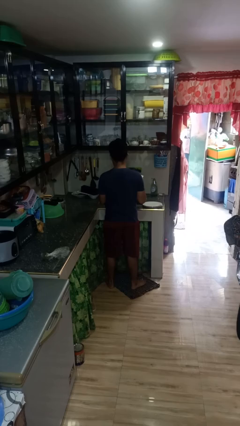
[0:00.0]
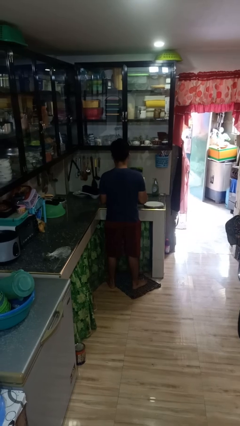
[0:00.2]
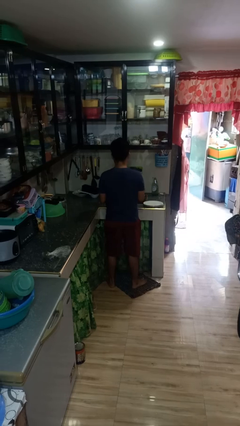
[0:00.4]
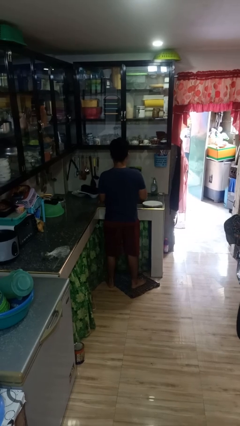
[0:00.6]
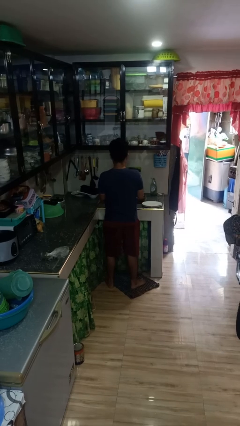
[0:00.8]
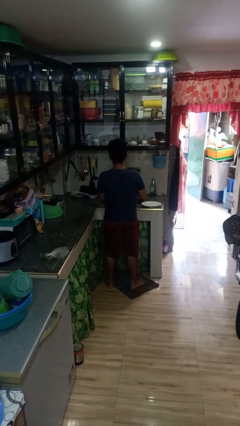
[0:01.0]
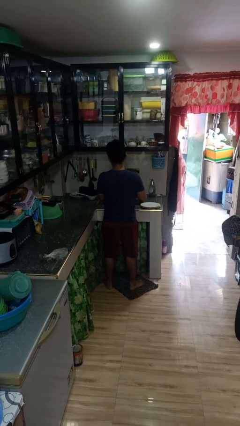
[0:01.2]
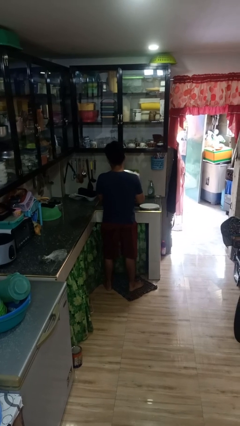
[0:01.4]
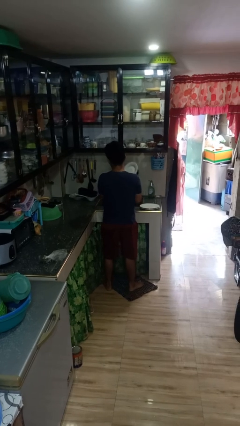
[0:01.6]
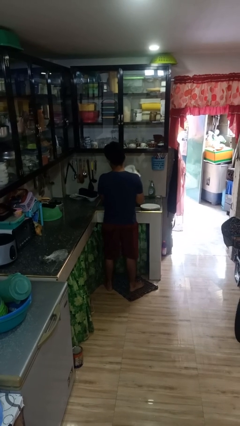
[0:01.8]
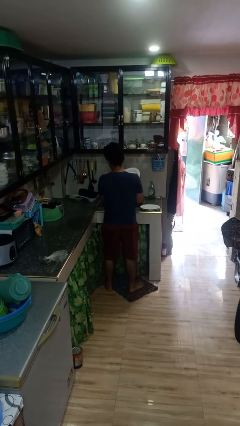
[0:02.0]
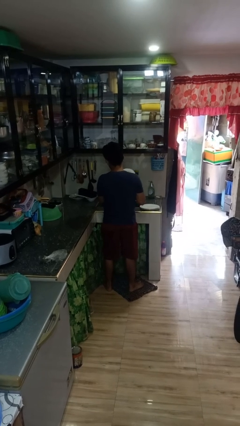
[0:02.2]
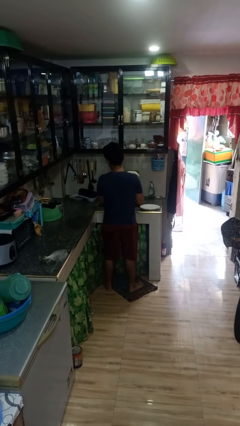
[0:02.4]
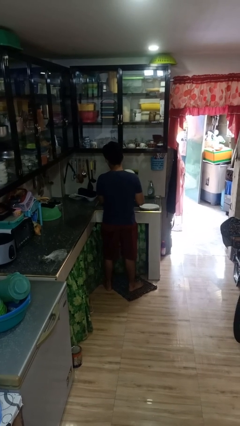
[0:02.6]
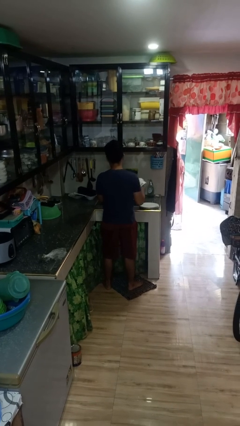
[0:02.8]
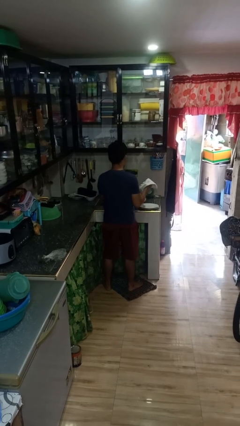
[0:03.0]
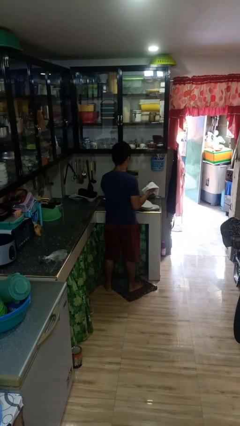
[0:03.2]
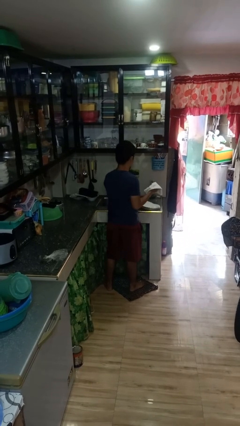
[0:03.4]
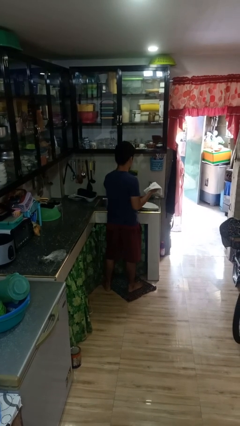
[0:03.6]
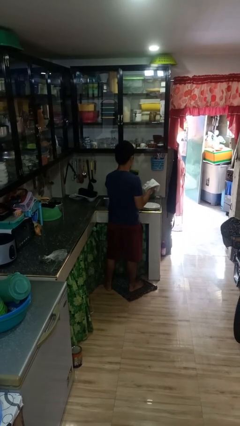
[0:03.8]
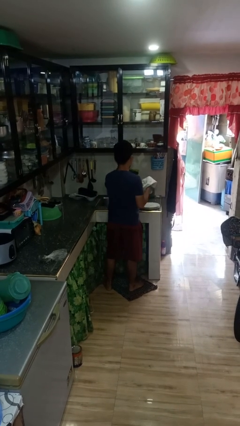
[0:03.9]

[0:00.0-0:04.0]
person dries dish

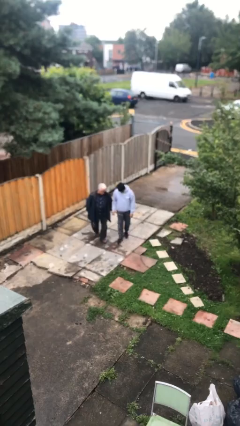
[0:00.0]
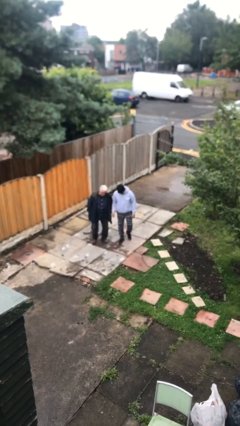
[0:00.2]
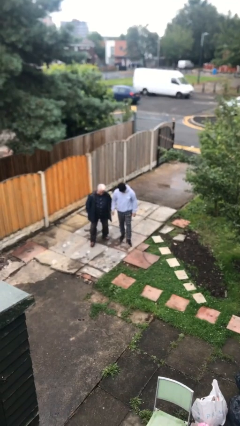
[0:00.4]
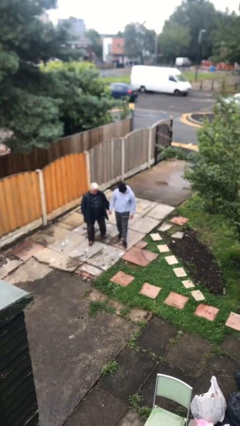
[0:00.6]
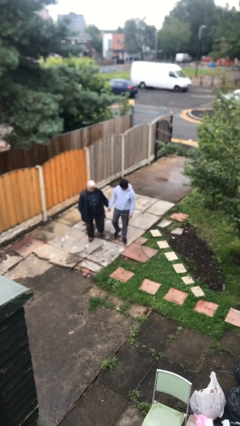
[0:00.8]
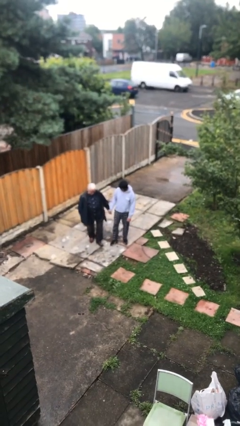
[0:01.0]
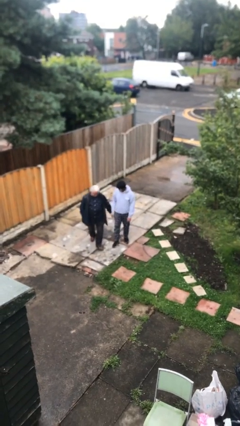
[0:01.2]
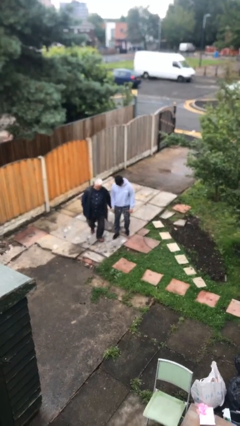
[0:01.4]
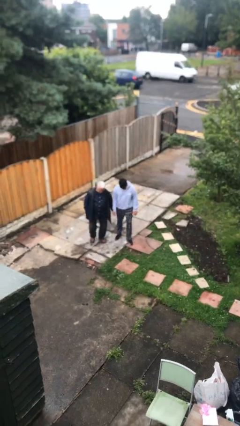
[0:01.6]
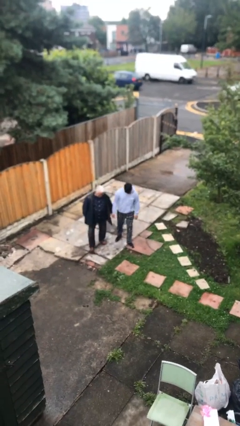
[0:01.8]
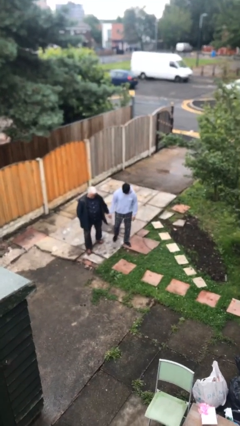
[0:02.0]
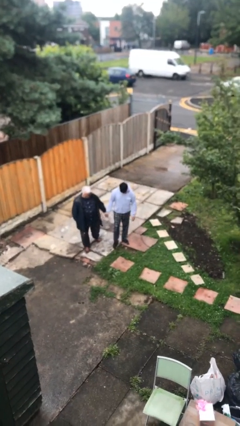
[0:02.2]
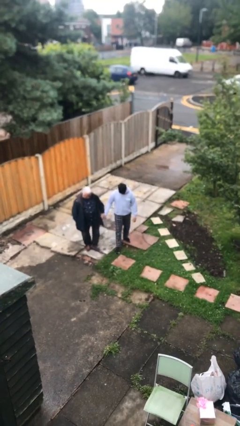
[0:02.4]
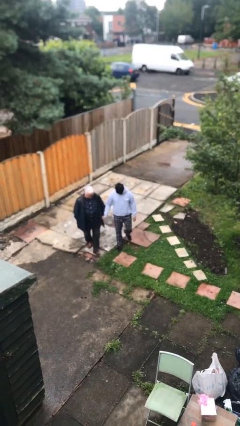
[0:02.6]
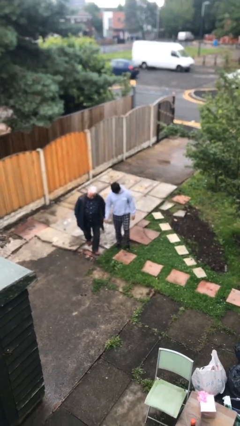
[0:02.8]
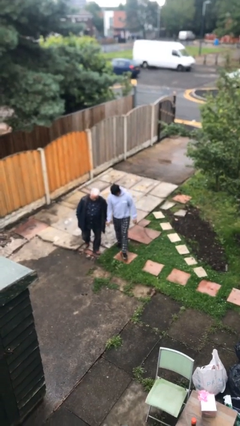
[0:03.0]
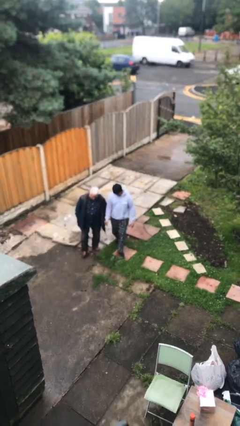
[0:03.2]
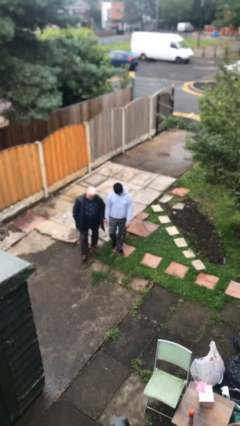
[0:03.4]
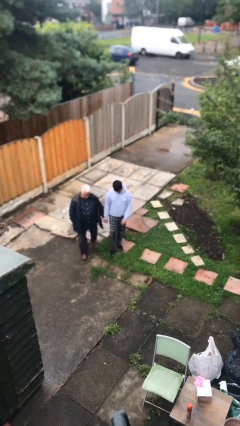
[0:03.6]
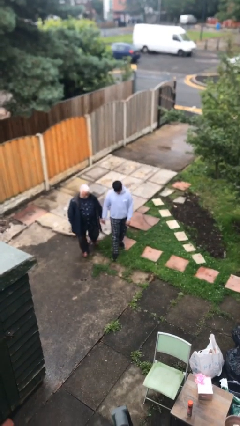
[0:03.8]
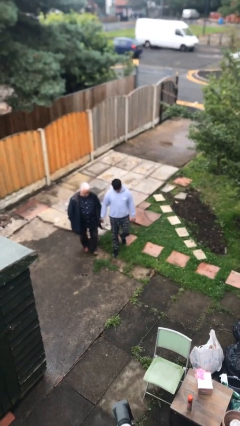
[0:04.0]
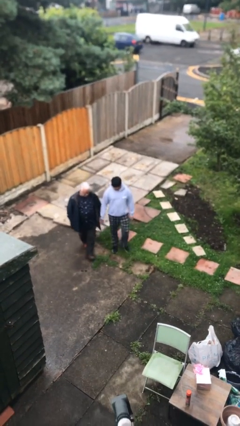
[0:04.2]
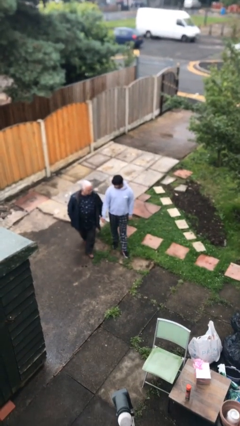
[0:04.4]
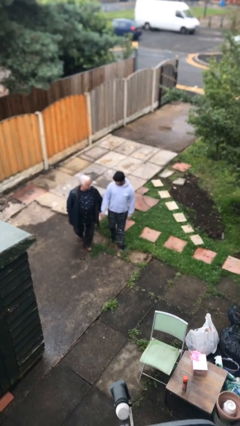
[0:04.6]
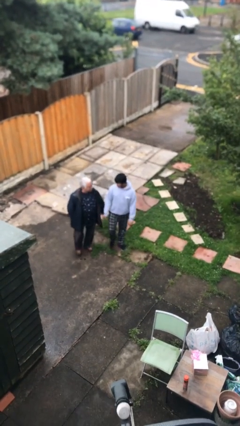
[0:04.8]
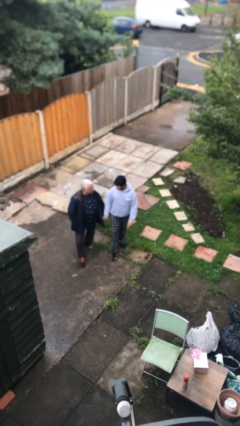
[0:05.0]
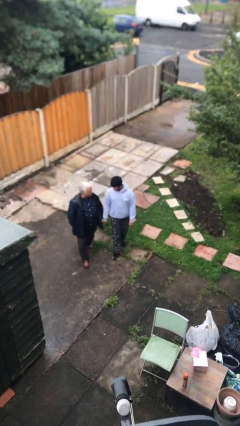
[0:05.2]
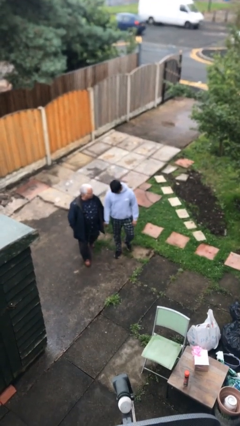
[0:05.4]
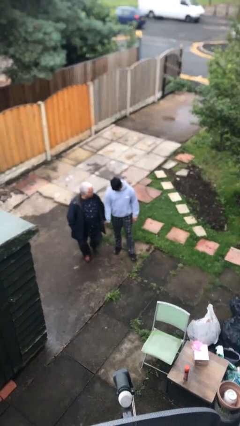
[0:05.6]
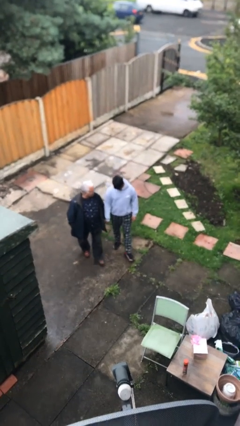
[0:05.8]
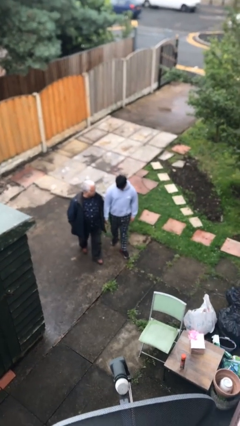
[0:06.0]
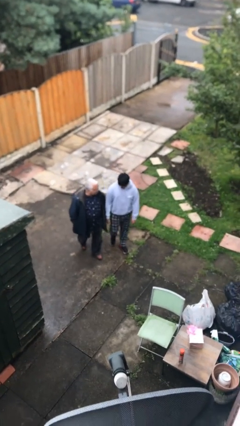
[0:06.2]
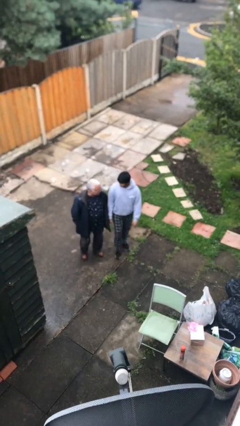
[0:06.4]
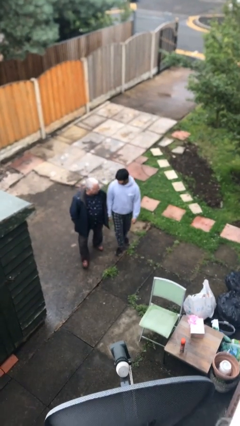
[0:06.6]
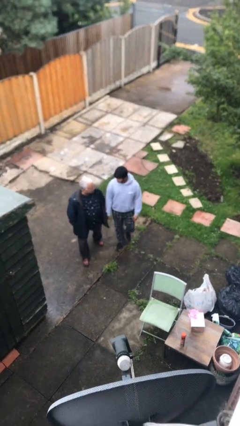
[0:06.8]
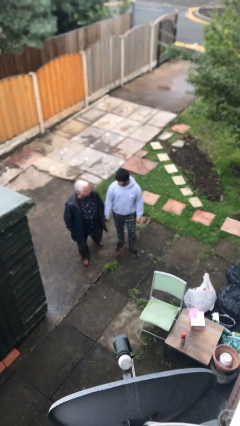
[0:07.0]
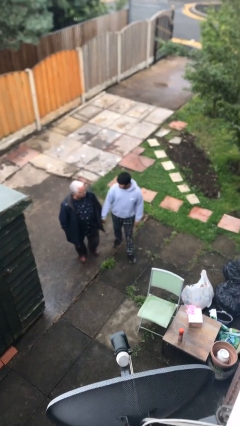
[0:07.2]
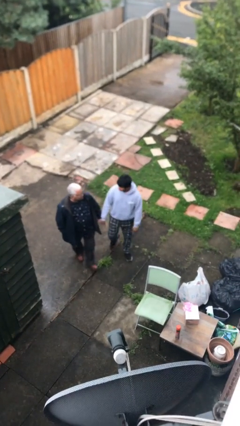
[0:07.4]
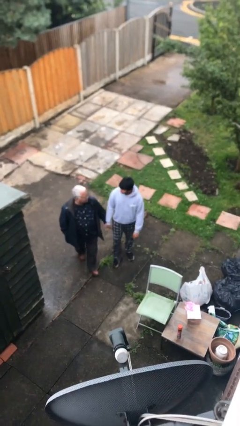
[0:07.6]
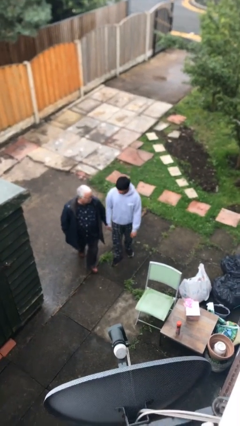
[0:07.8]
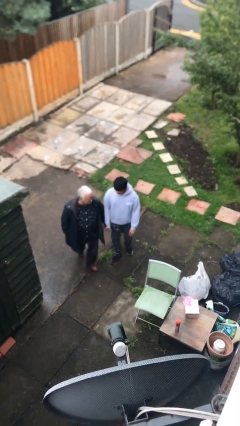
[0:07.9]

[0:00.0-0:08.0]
person holds hand

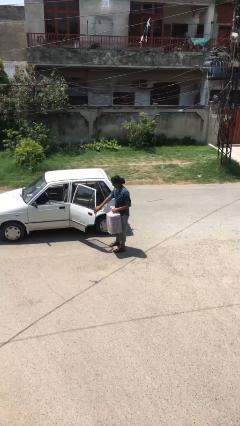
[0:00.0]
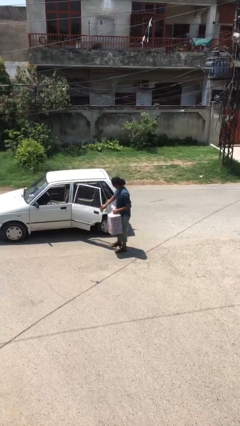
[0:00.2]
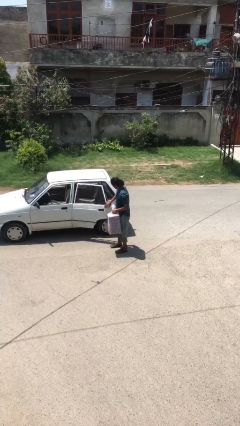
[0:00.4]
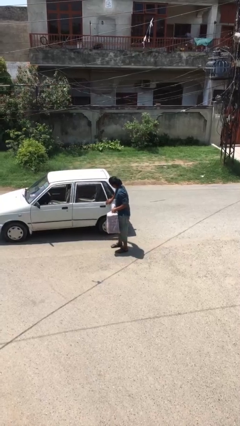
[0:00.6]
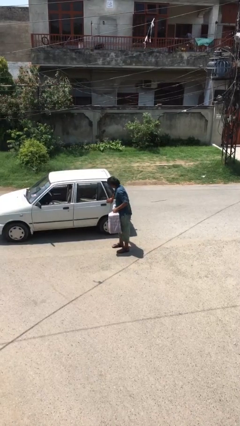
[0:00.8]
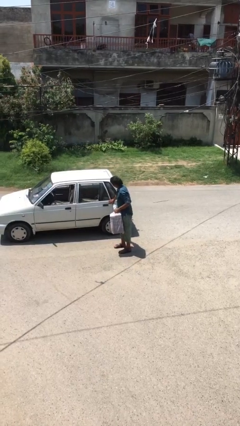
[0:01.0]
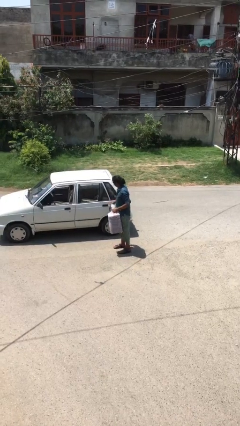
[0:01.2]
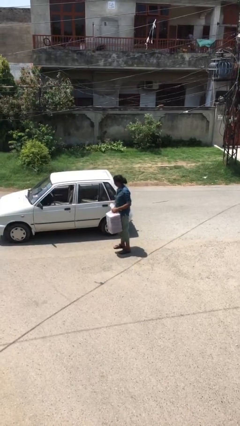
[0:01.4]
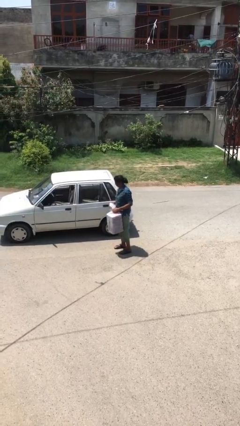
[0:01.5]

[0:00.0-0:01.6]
person closes car door

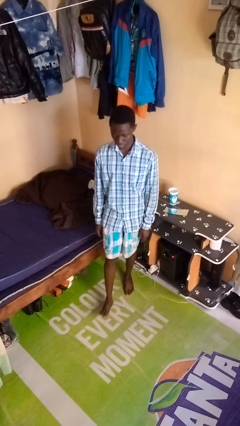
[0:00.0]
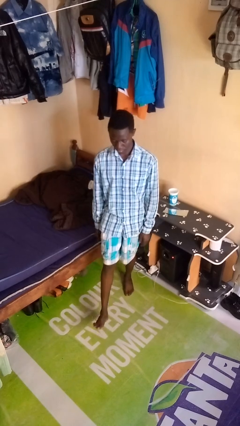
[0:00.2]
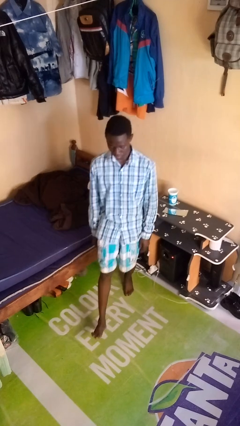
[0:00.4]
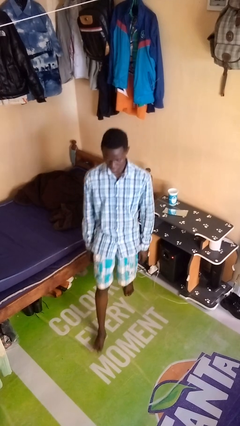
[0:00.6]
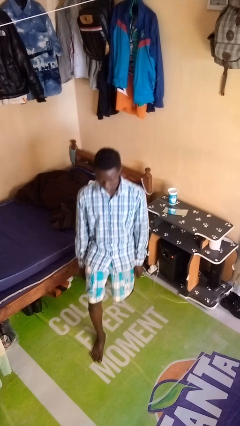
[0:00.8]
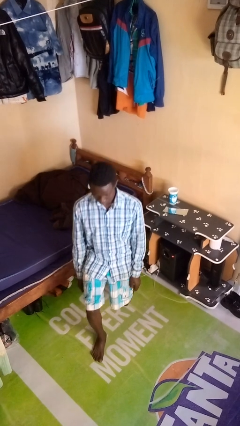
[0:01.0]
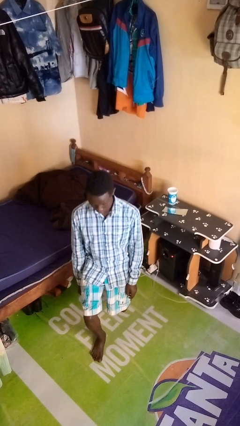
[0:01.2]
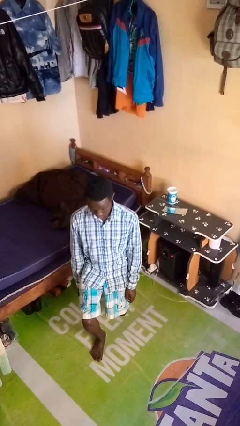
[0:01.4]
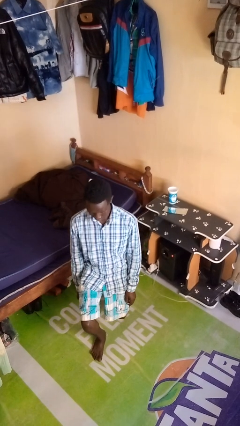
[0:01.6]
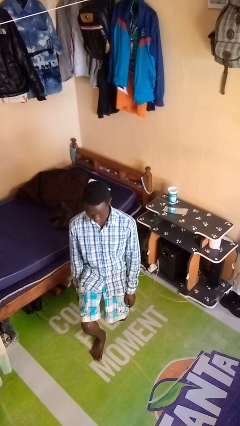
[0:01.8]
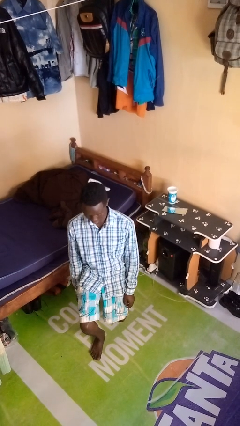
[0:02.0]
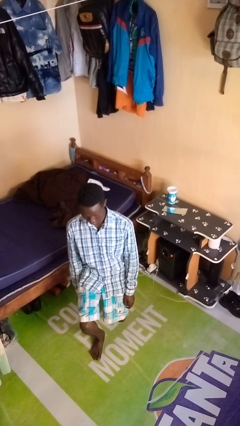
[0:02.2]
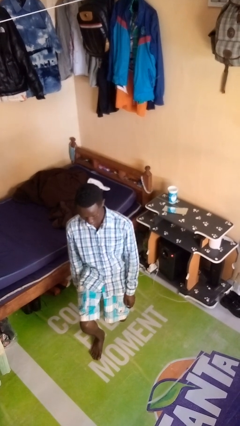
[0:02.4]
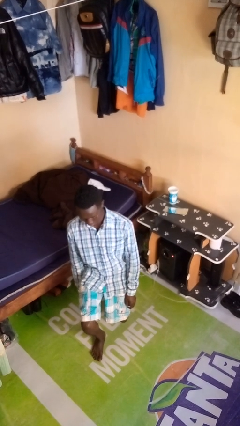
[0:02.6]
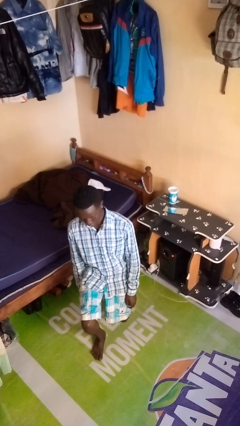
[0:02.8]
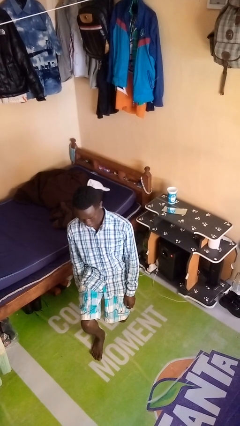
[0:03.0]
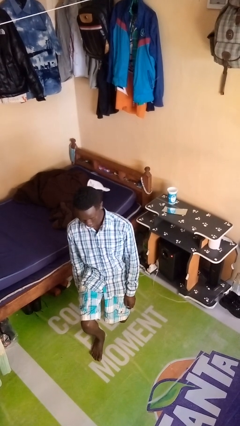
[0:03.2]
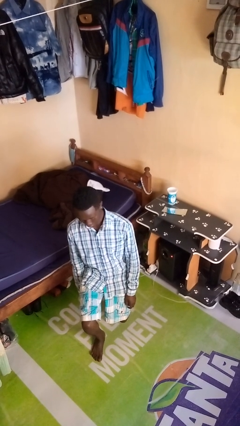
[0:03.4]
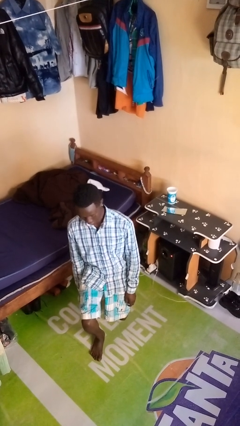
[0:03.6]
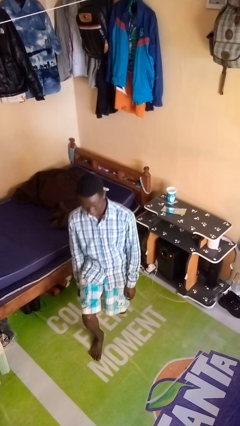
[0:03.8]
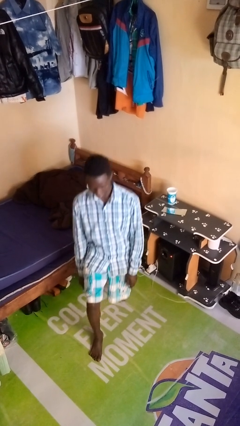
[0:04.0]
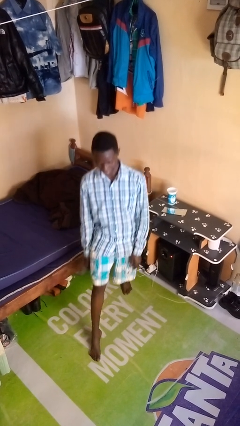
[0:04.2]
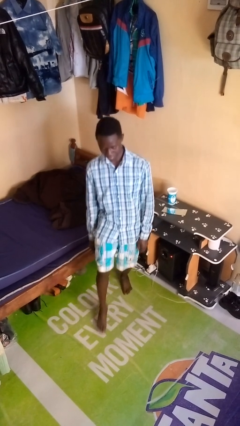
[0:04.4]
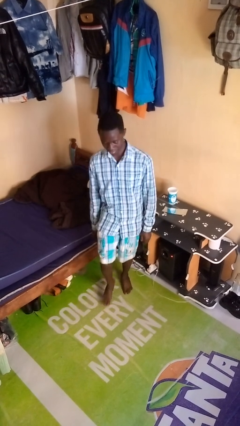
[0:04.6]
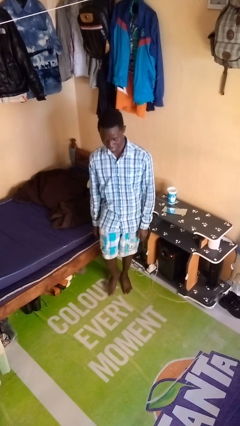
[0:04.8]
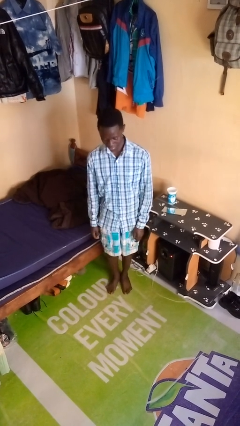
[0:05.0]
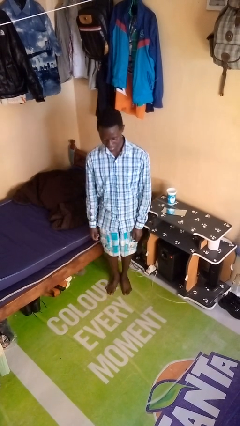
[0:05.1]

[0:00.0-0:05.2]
person exercises with lunges
